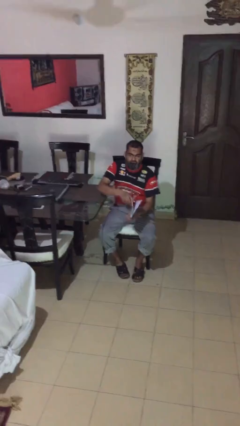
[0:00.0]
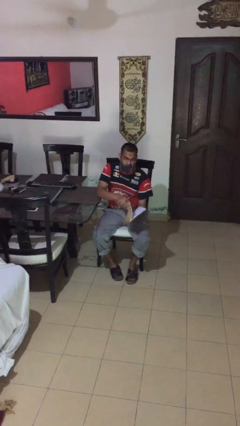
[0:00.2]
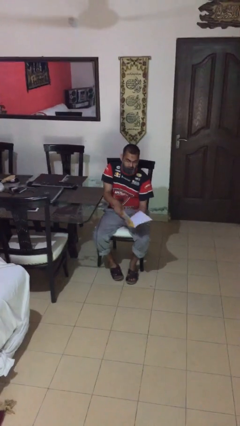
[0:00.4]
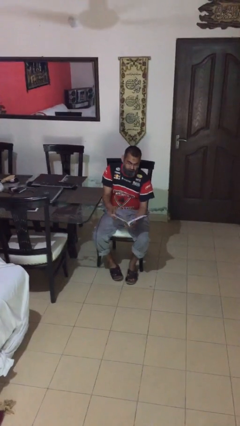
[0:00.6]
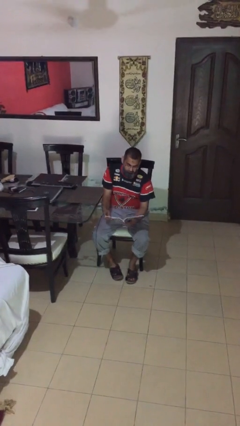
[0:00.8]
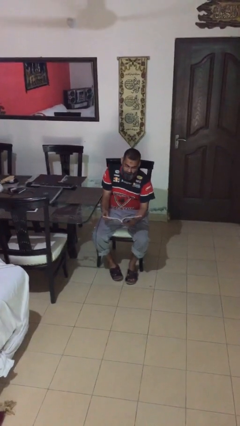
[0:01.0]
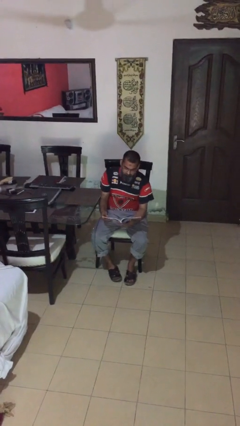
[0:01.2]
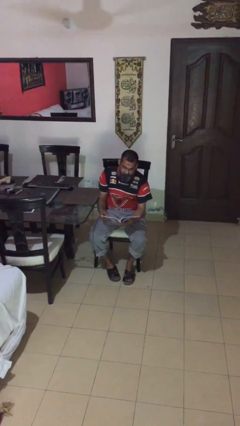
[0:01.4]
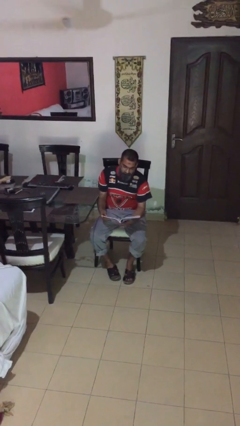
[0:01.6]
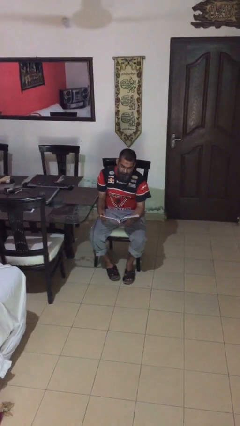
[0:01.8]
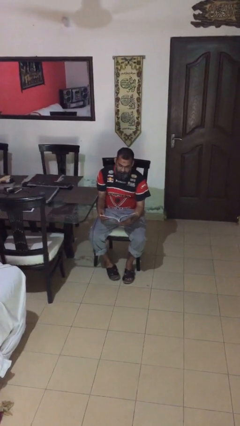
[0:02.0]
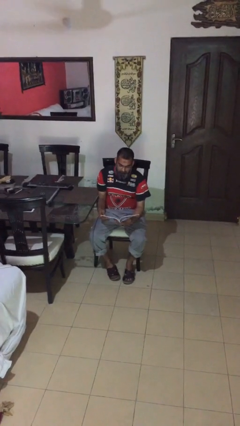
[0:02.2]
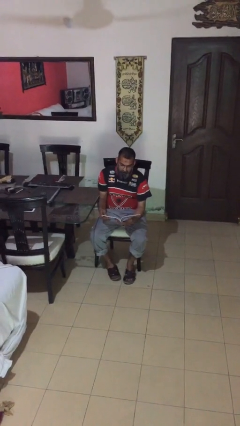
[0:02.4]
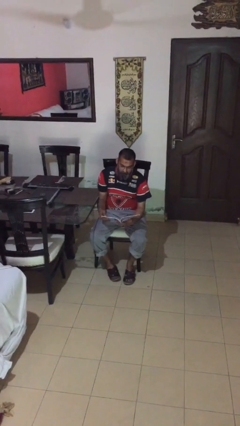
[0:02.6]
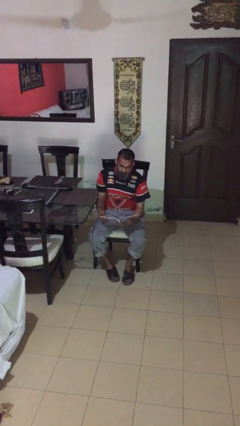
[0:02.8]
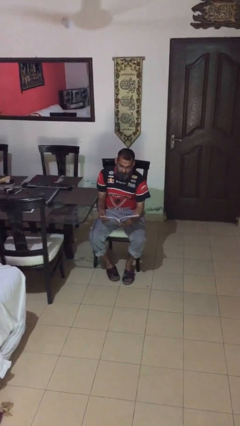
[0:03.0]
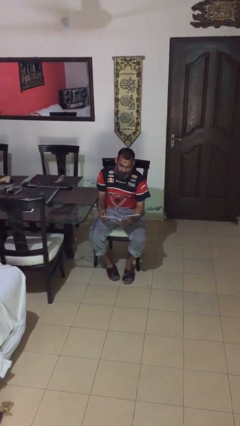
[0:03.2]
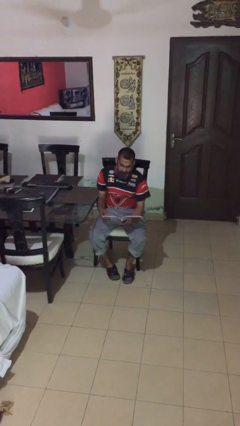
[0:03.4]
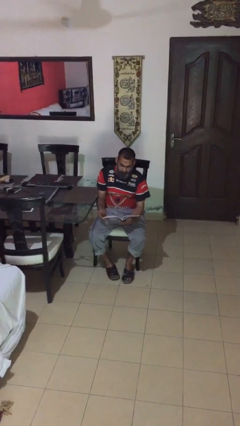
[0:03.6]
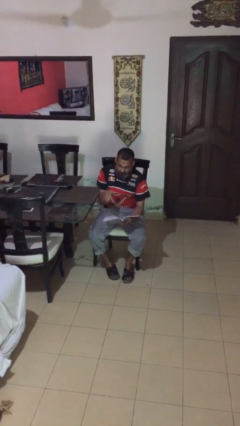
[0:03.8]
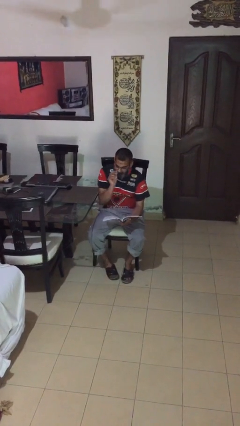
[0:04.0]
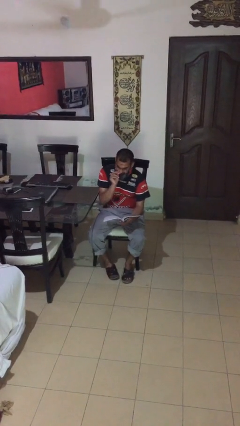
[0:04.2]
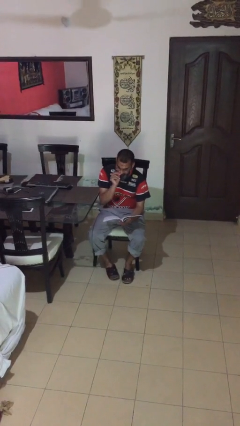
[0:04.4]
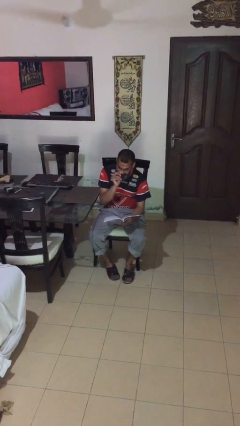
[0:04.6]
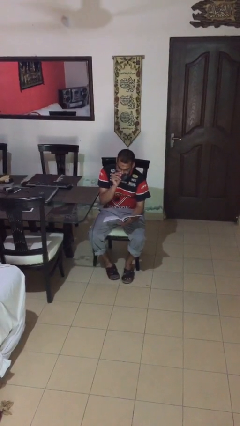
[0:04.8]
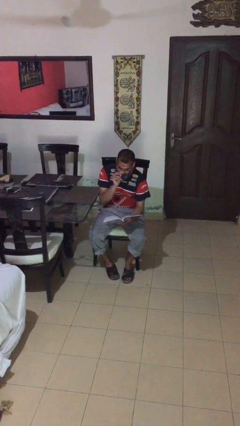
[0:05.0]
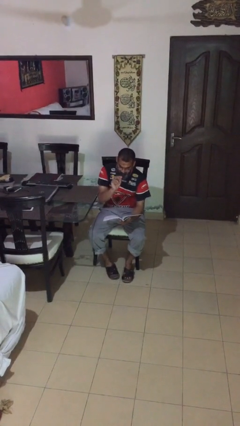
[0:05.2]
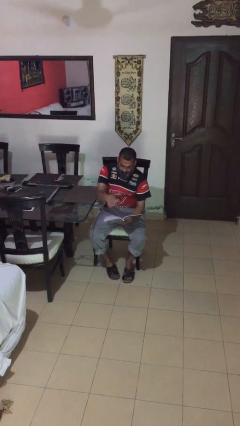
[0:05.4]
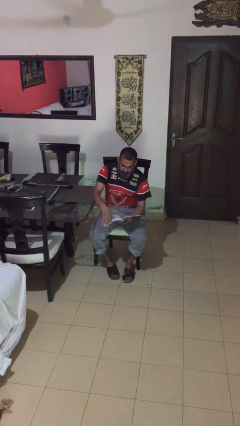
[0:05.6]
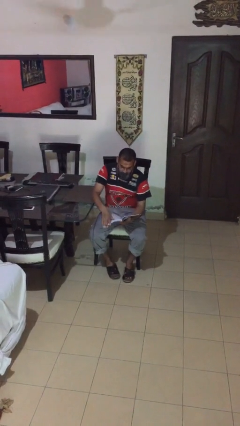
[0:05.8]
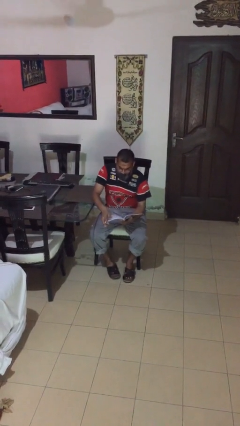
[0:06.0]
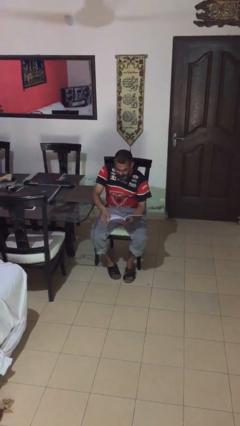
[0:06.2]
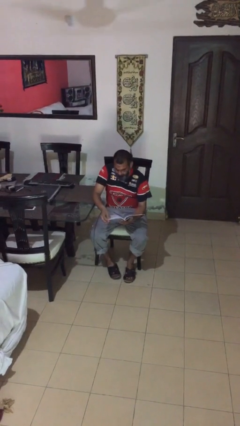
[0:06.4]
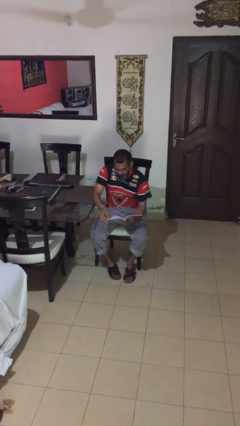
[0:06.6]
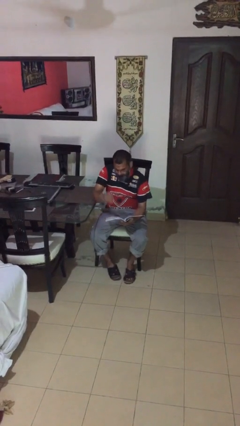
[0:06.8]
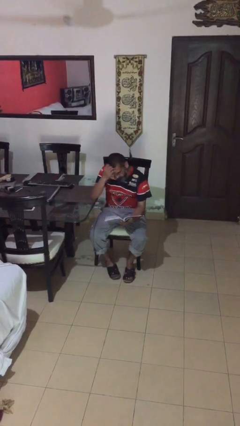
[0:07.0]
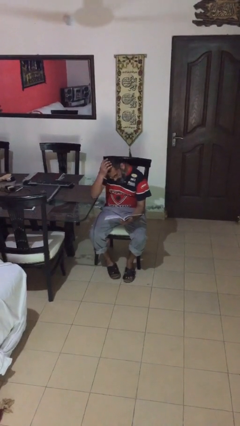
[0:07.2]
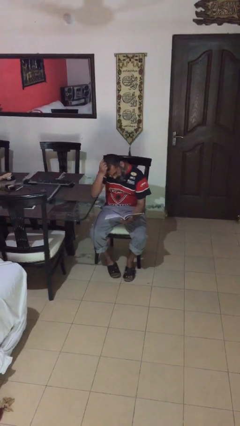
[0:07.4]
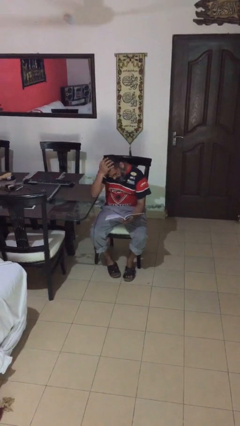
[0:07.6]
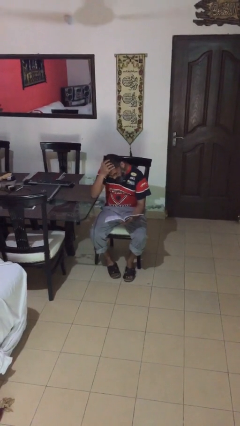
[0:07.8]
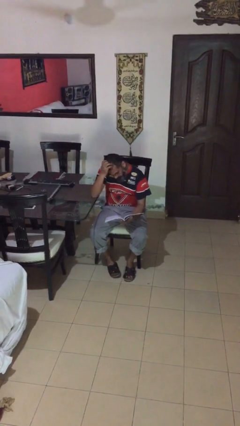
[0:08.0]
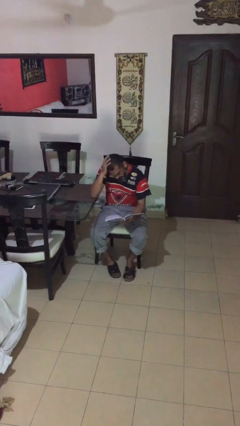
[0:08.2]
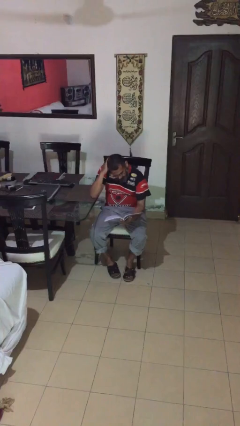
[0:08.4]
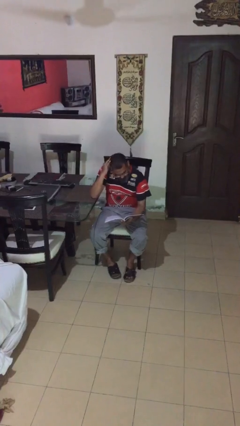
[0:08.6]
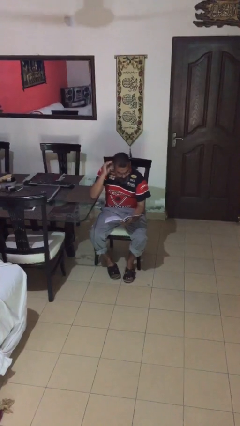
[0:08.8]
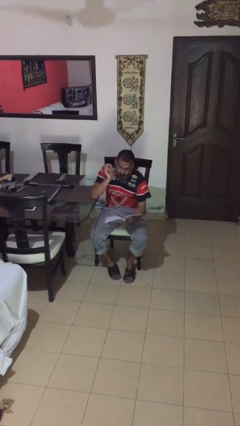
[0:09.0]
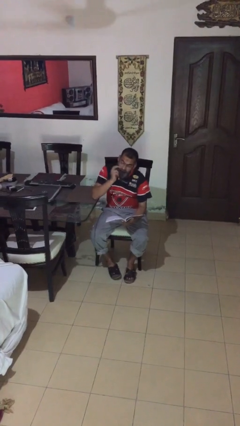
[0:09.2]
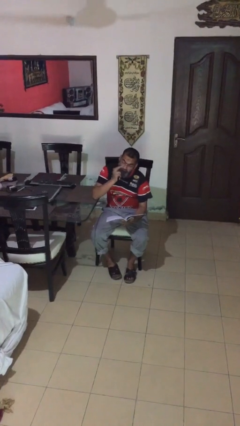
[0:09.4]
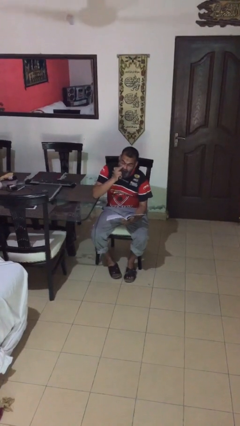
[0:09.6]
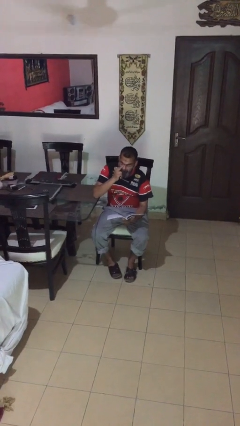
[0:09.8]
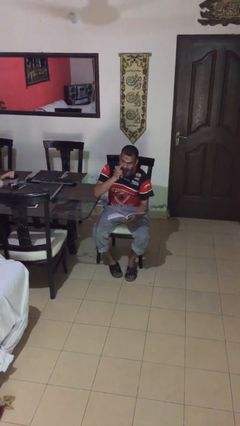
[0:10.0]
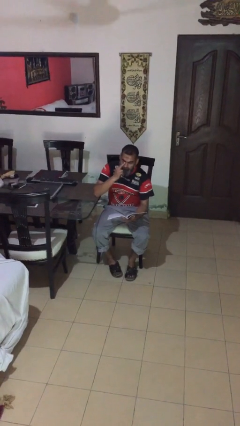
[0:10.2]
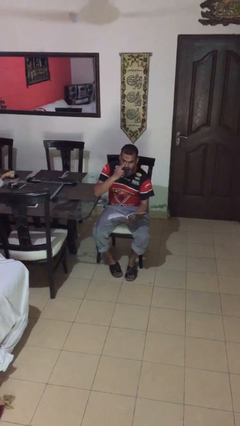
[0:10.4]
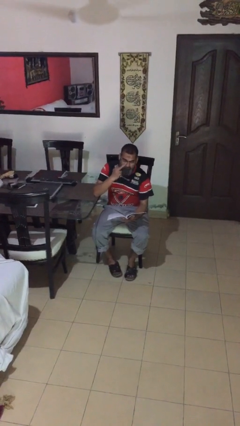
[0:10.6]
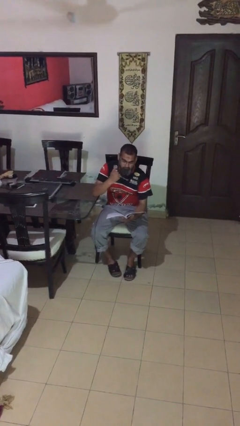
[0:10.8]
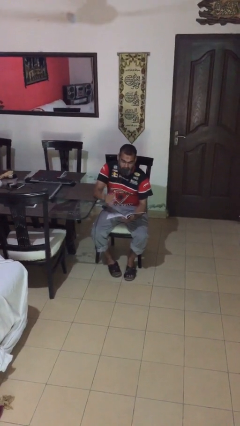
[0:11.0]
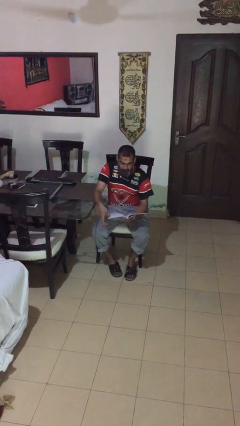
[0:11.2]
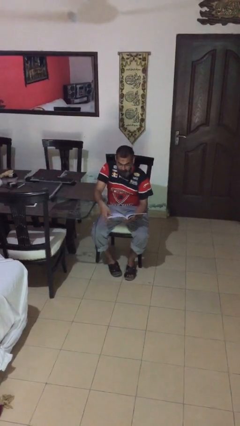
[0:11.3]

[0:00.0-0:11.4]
person reads document

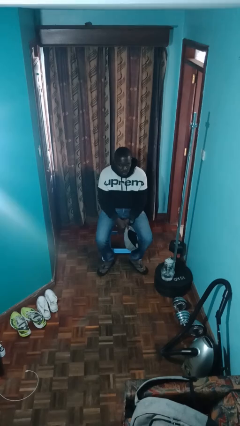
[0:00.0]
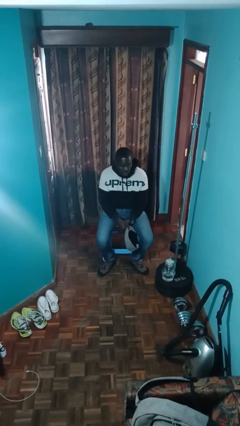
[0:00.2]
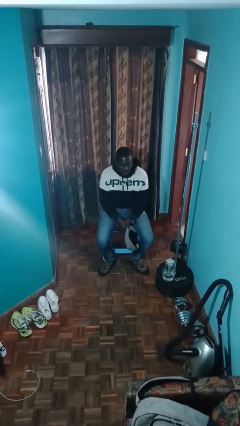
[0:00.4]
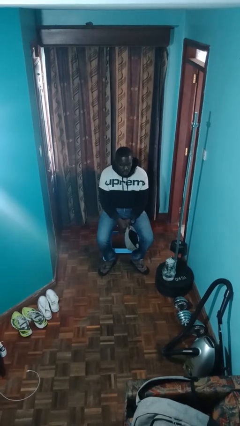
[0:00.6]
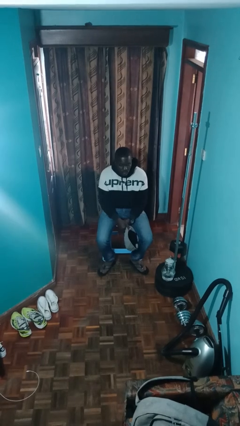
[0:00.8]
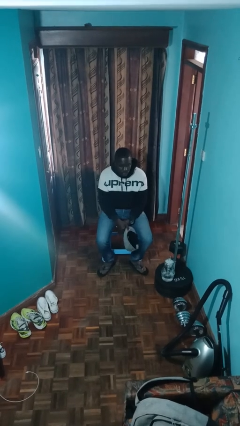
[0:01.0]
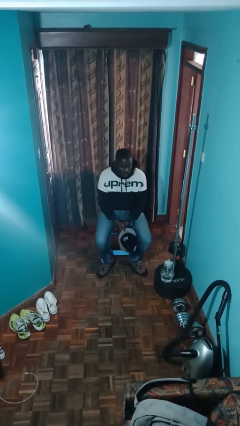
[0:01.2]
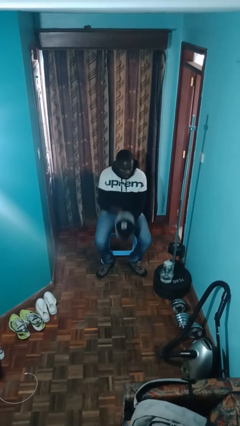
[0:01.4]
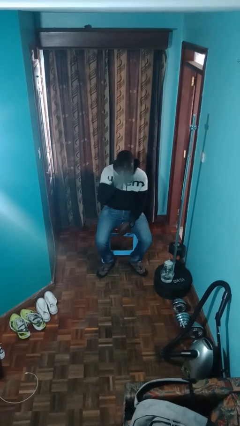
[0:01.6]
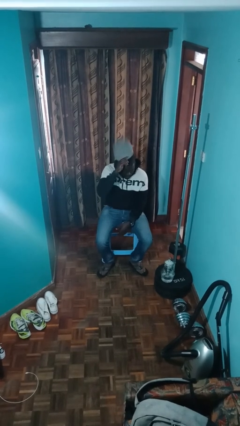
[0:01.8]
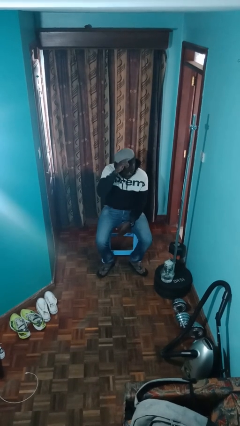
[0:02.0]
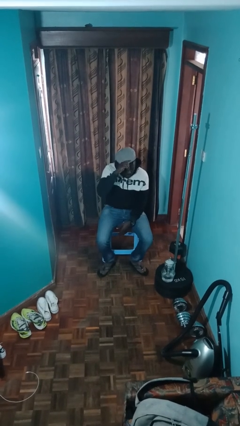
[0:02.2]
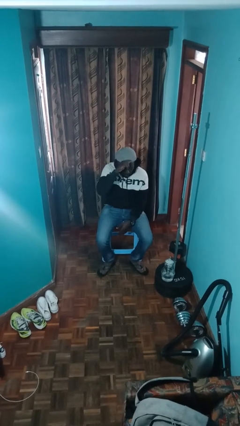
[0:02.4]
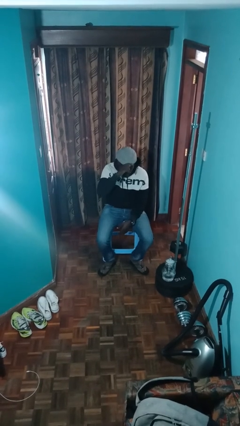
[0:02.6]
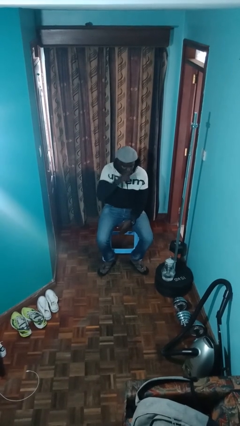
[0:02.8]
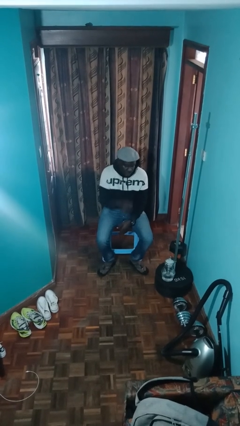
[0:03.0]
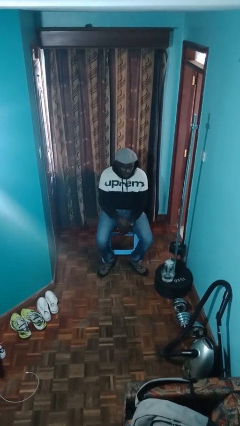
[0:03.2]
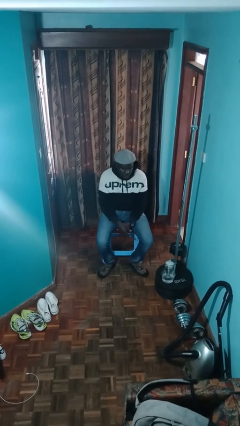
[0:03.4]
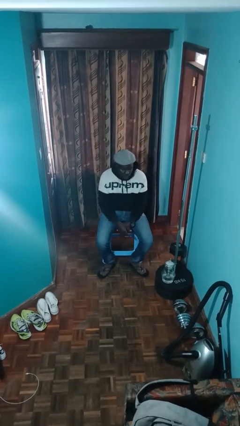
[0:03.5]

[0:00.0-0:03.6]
person puts on hat

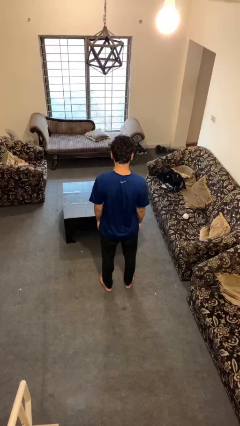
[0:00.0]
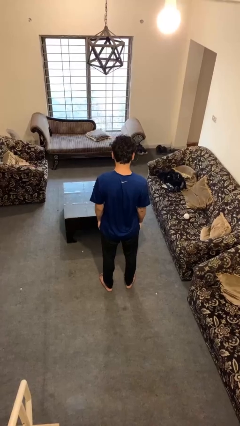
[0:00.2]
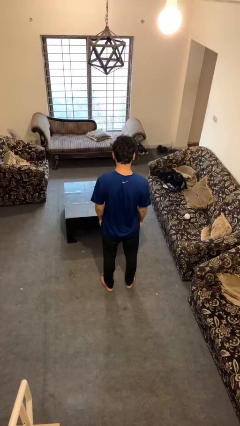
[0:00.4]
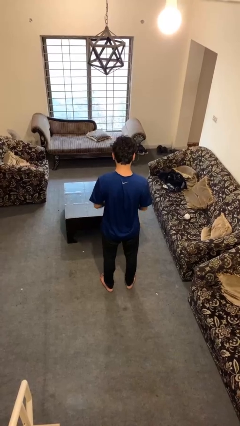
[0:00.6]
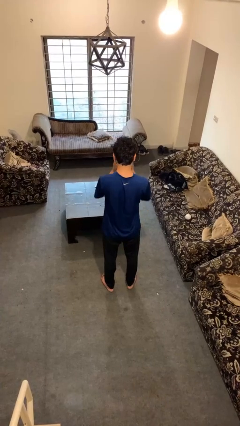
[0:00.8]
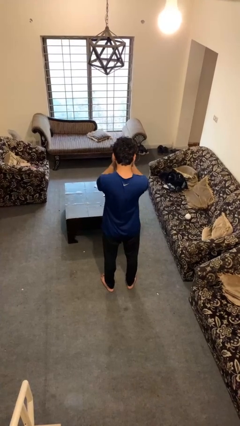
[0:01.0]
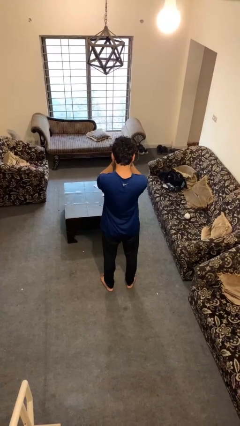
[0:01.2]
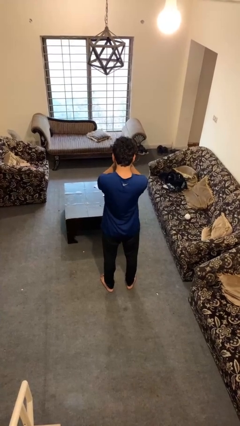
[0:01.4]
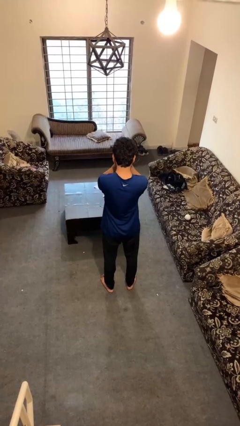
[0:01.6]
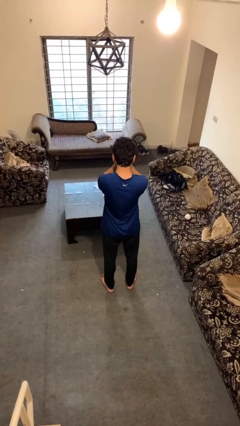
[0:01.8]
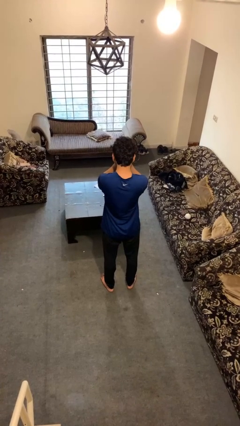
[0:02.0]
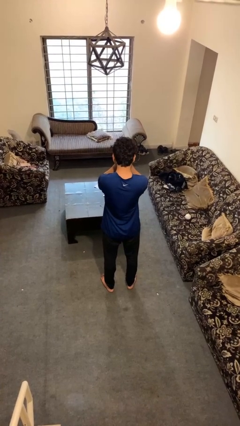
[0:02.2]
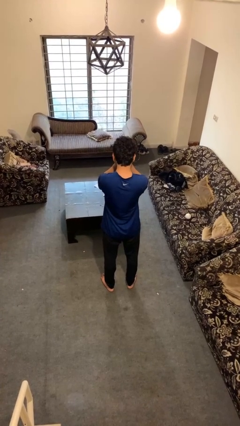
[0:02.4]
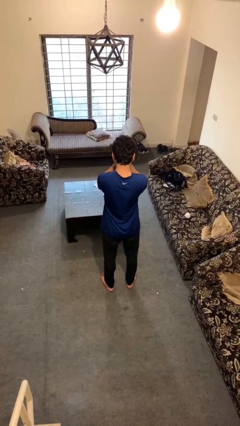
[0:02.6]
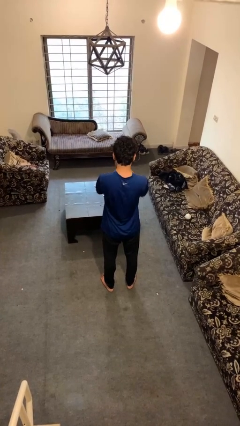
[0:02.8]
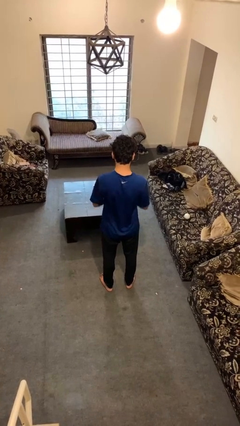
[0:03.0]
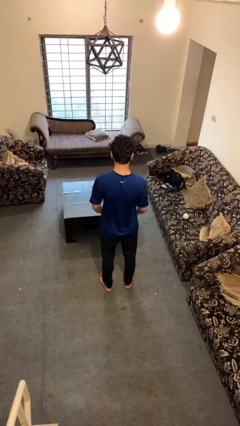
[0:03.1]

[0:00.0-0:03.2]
person covers face with hands
